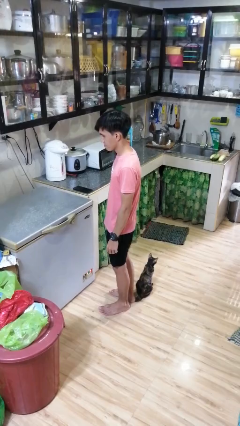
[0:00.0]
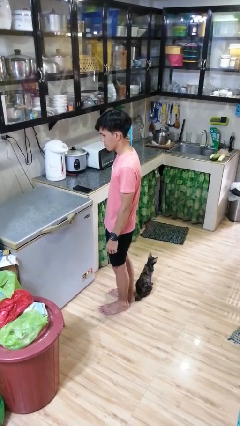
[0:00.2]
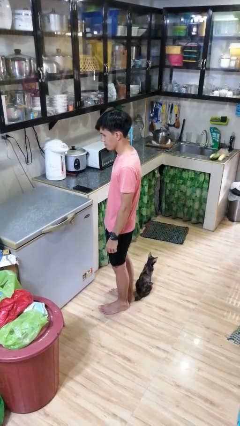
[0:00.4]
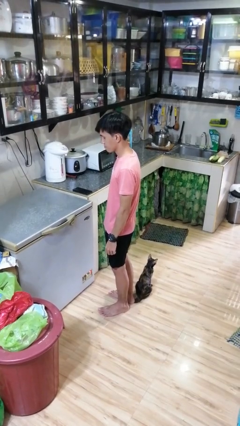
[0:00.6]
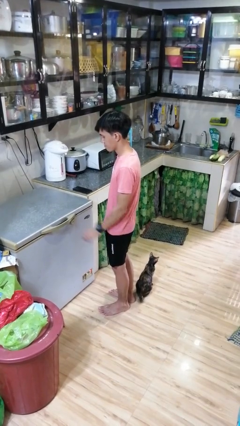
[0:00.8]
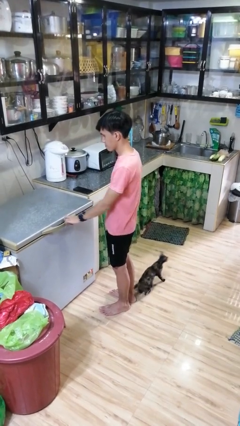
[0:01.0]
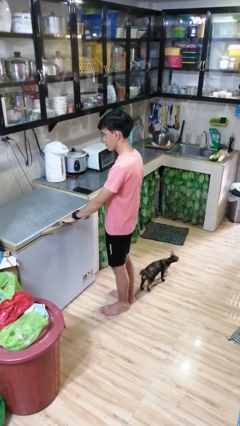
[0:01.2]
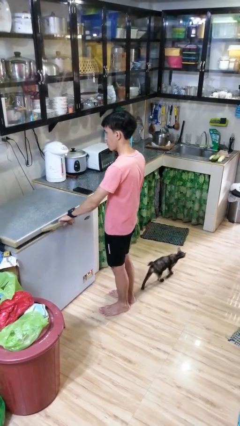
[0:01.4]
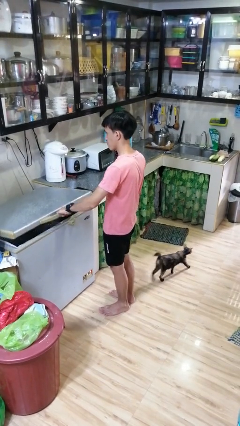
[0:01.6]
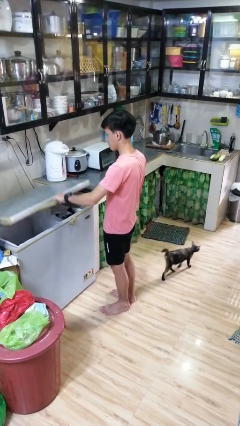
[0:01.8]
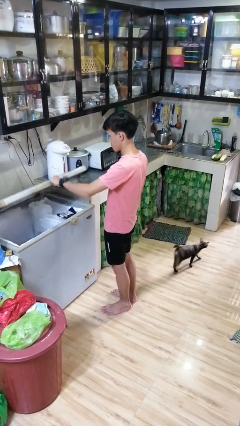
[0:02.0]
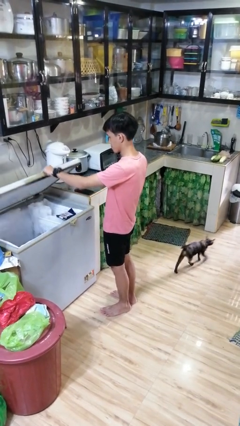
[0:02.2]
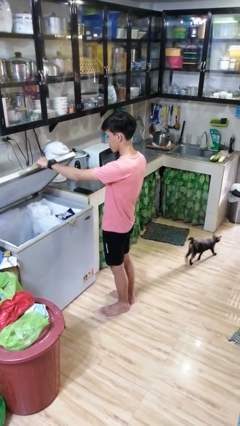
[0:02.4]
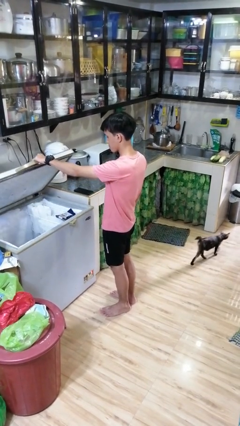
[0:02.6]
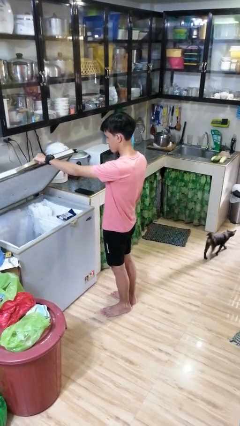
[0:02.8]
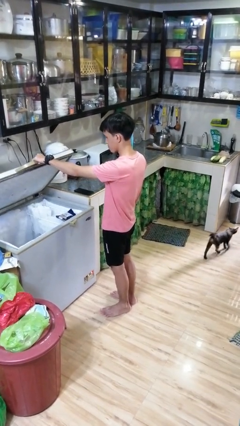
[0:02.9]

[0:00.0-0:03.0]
person opens refrigerator

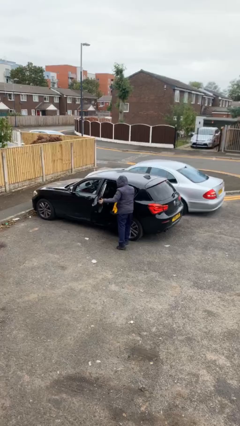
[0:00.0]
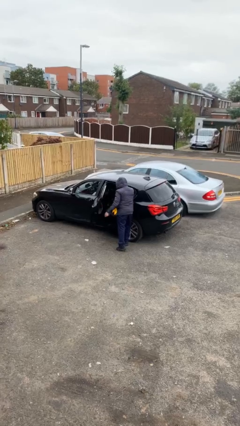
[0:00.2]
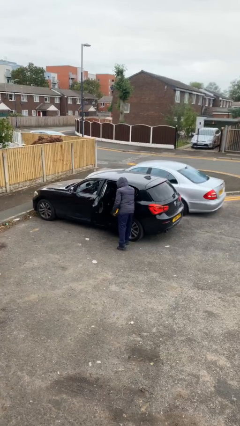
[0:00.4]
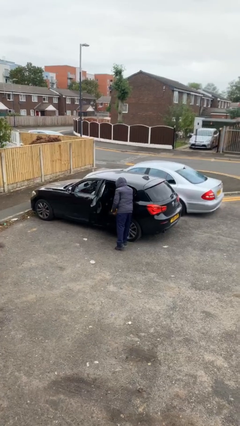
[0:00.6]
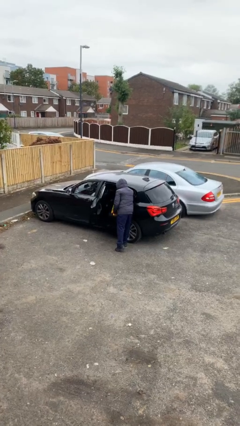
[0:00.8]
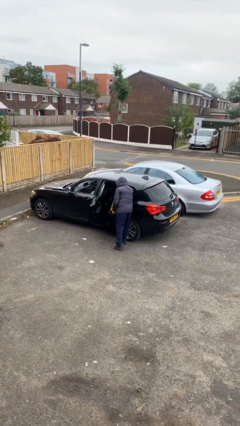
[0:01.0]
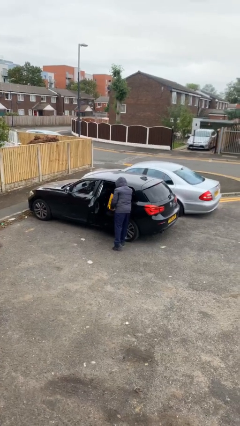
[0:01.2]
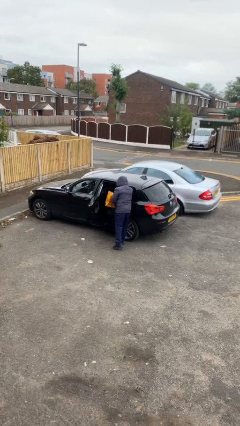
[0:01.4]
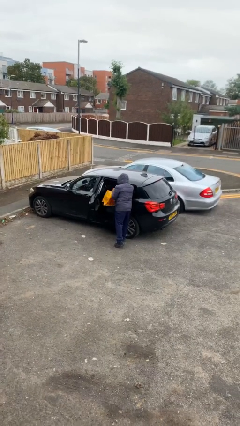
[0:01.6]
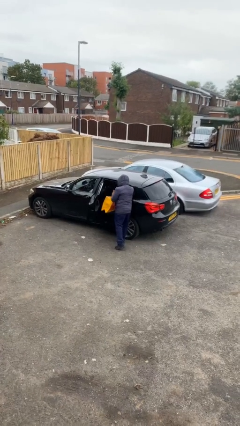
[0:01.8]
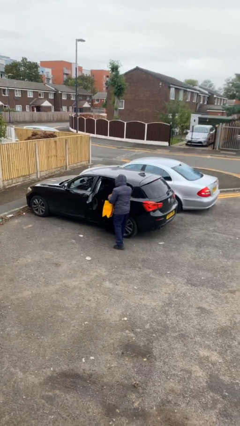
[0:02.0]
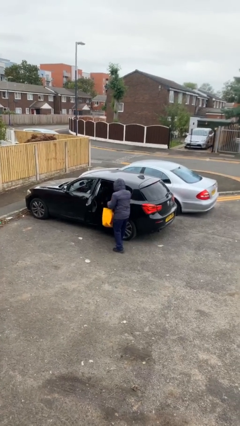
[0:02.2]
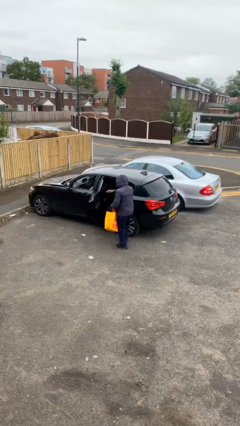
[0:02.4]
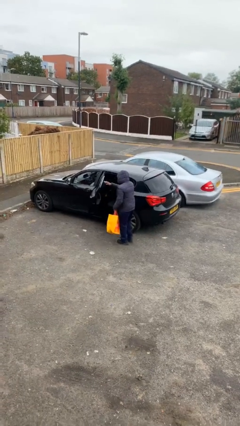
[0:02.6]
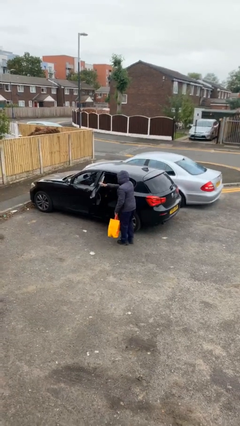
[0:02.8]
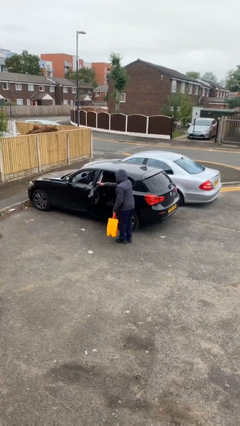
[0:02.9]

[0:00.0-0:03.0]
person unloads car

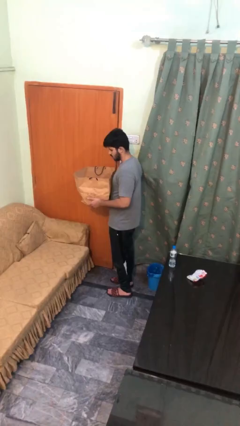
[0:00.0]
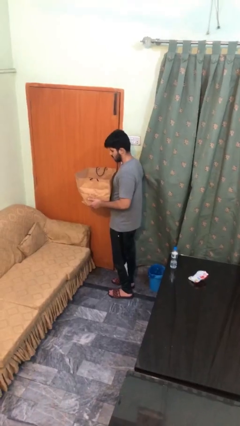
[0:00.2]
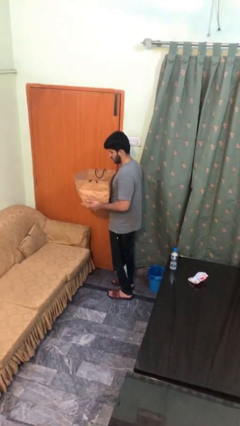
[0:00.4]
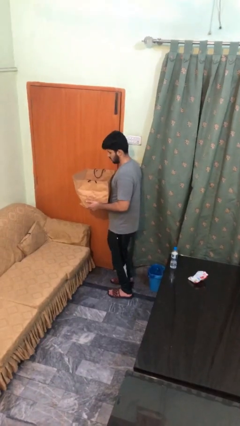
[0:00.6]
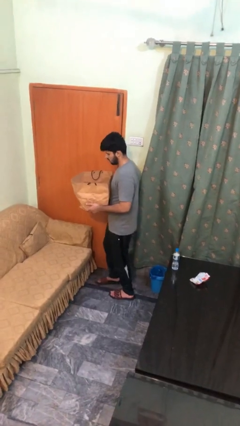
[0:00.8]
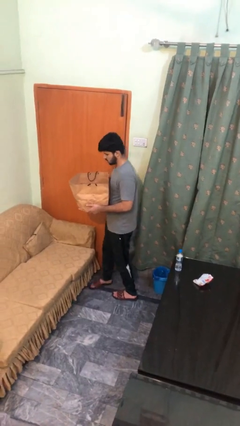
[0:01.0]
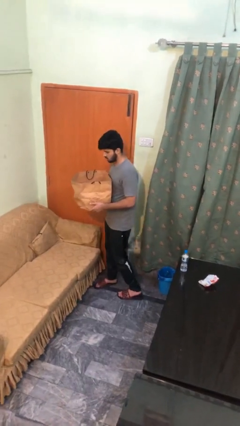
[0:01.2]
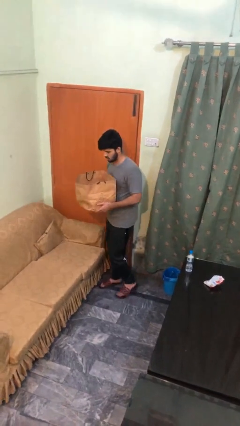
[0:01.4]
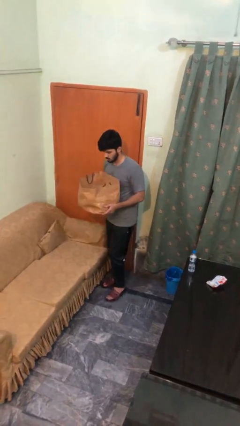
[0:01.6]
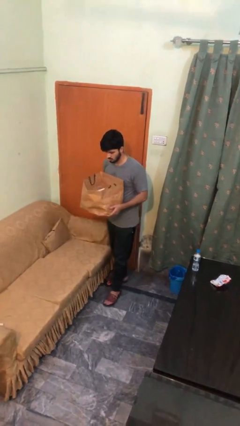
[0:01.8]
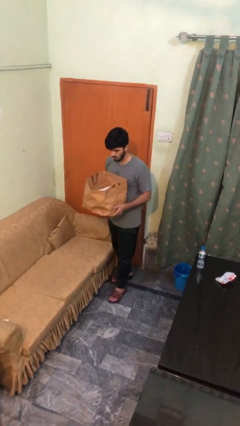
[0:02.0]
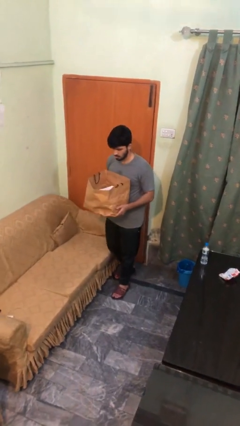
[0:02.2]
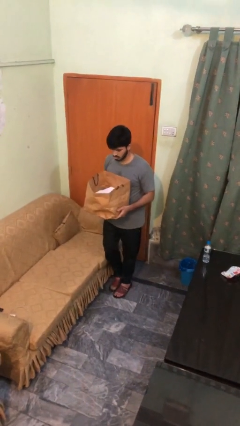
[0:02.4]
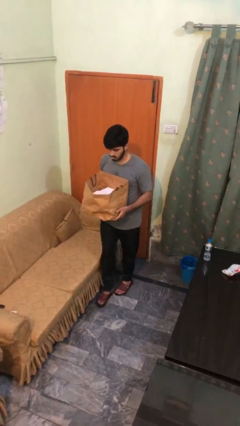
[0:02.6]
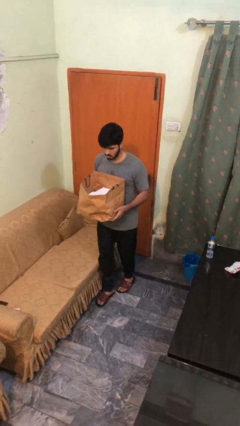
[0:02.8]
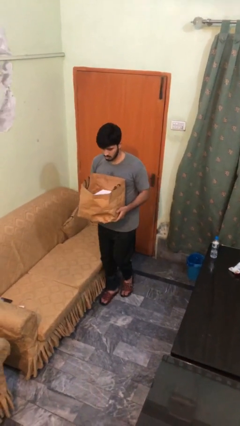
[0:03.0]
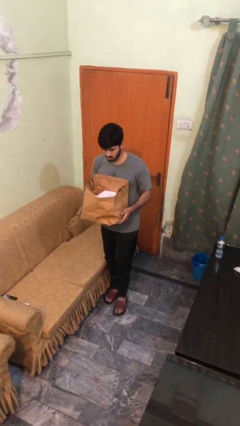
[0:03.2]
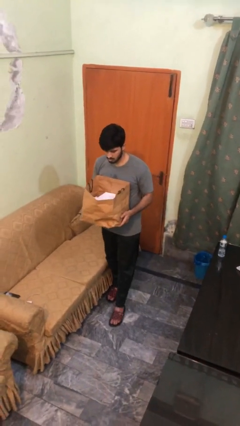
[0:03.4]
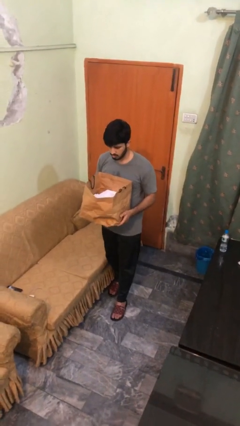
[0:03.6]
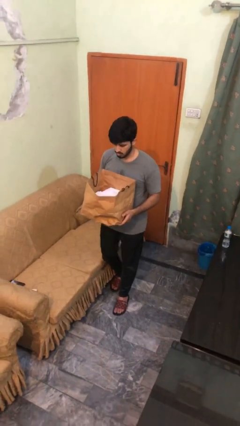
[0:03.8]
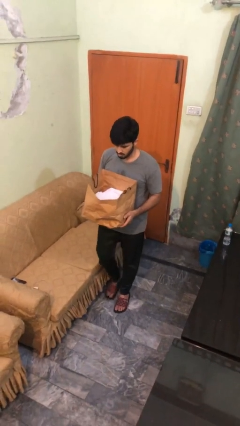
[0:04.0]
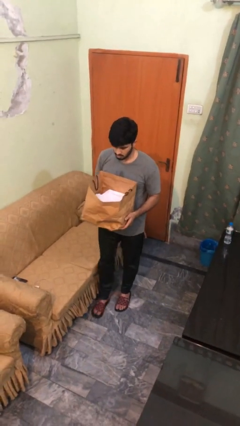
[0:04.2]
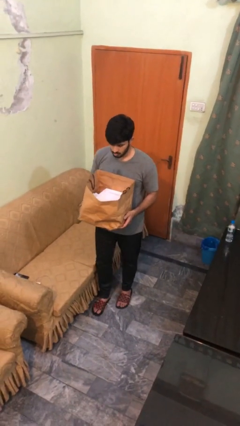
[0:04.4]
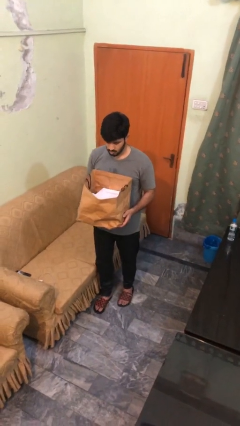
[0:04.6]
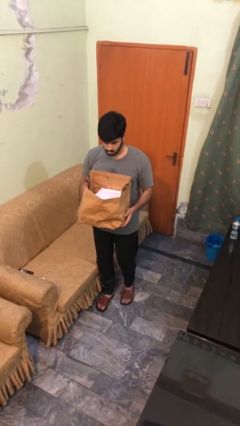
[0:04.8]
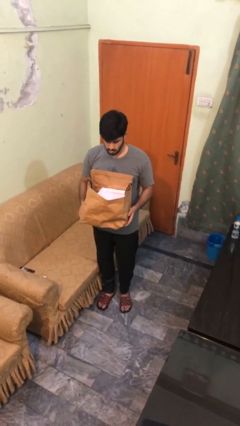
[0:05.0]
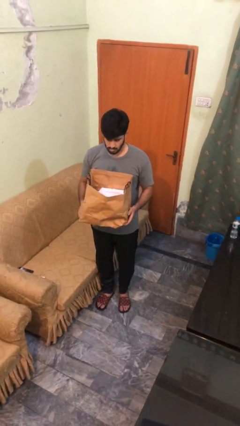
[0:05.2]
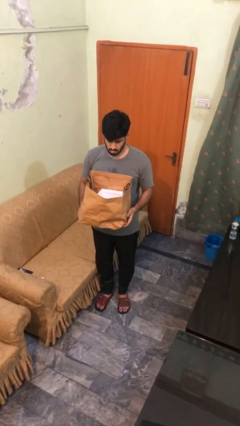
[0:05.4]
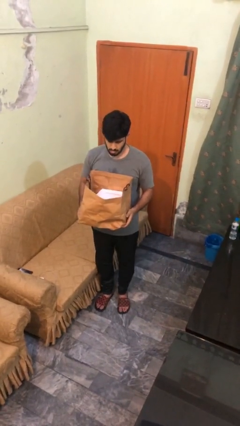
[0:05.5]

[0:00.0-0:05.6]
person carries groceries

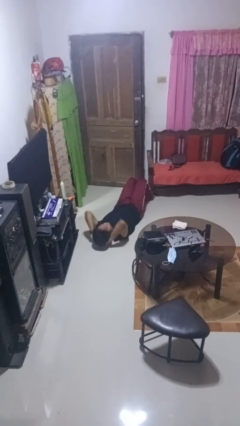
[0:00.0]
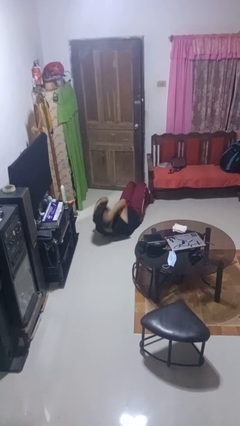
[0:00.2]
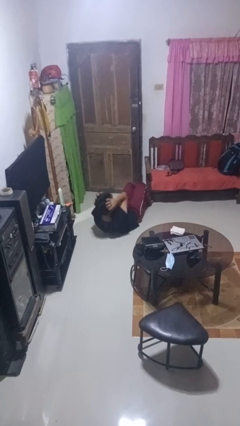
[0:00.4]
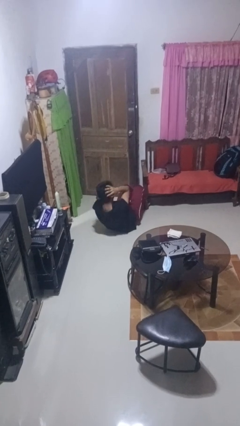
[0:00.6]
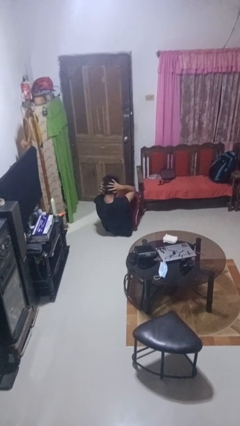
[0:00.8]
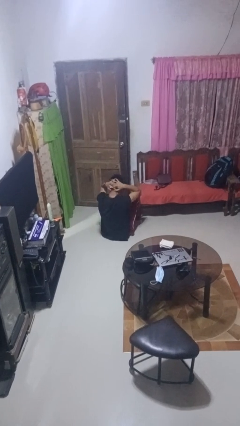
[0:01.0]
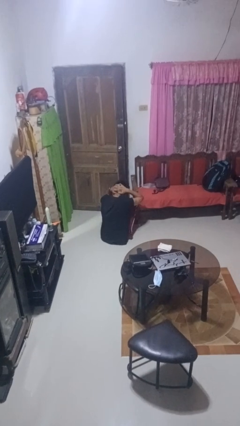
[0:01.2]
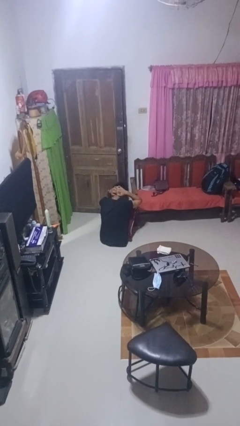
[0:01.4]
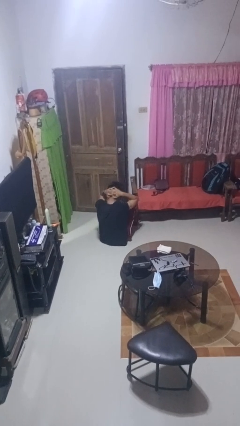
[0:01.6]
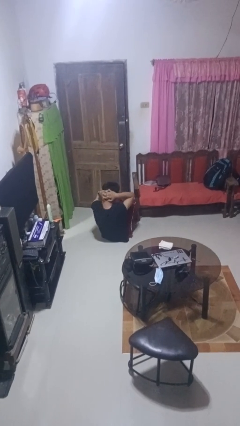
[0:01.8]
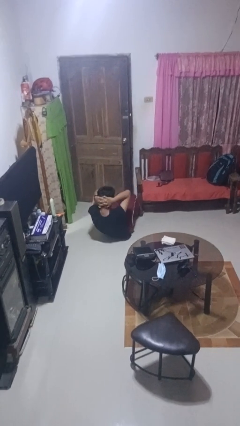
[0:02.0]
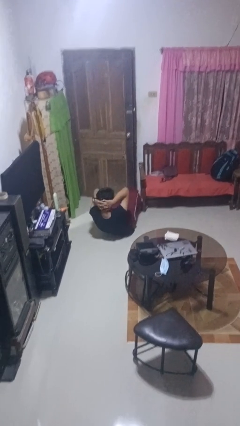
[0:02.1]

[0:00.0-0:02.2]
person exercises with situp

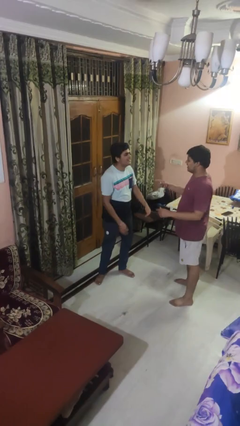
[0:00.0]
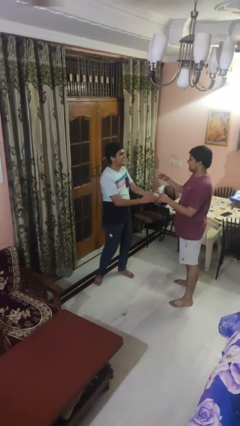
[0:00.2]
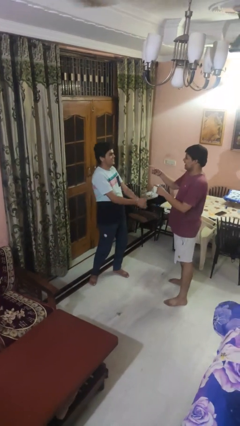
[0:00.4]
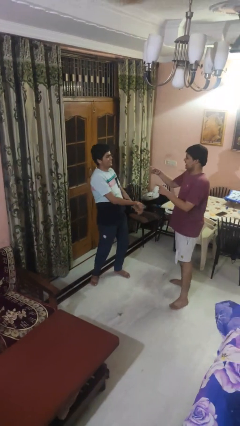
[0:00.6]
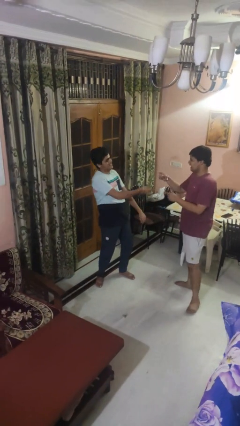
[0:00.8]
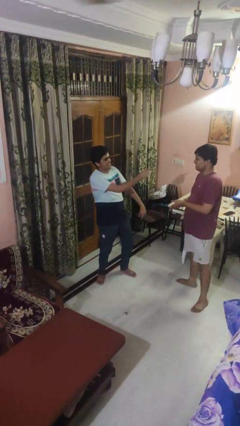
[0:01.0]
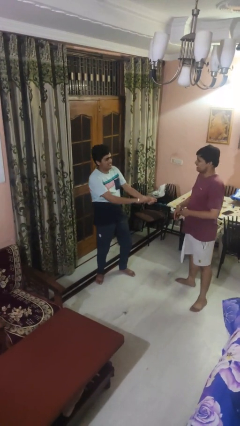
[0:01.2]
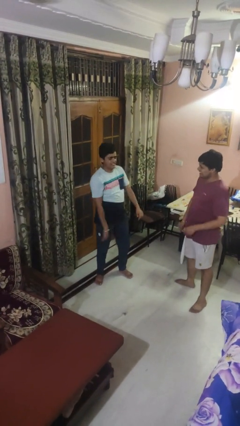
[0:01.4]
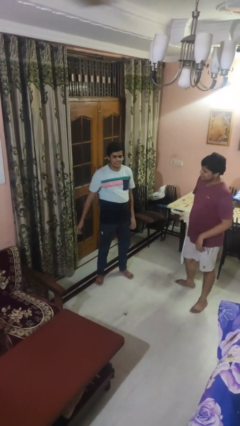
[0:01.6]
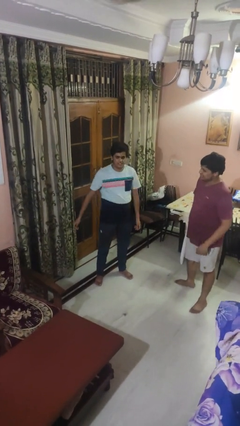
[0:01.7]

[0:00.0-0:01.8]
person laughs with person

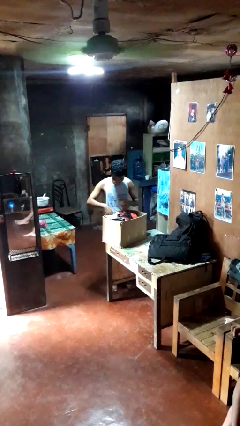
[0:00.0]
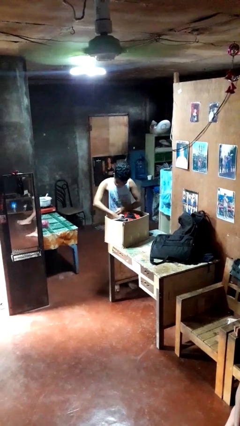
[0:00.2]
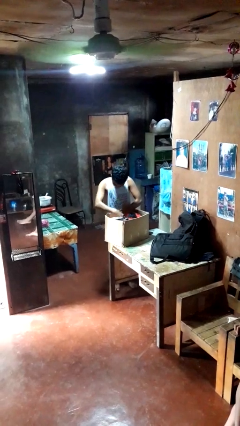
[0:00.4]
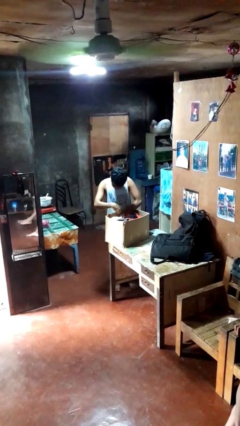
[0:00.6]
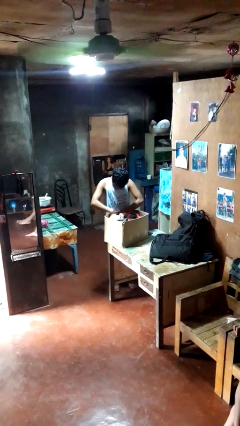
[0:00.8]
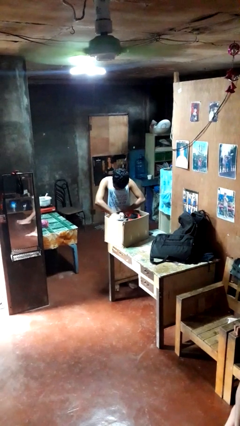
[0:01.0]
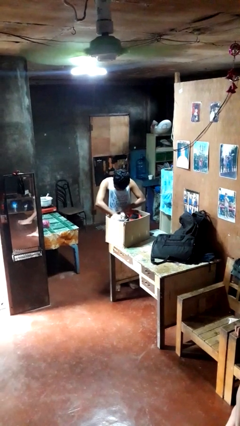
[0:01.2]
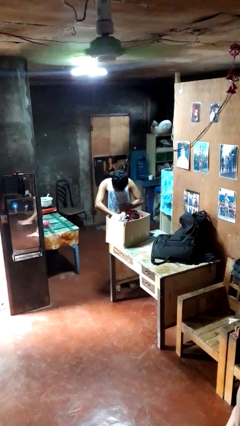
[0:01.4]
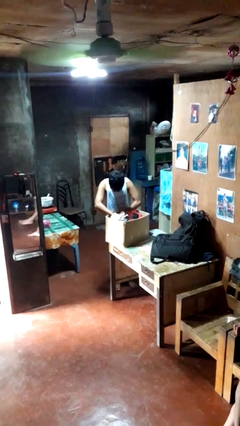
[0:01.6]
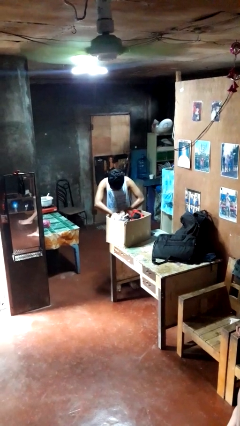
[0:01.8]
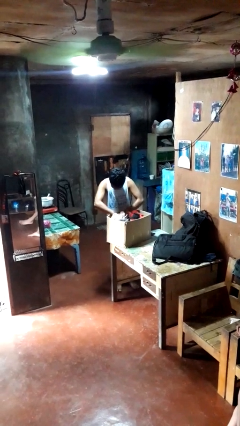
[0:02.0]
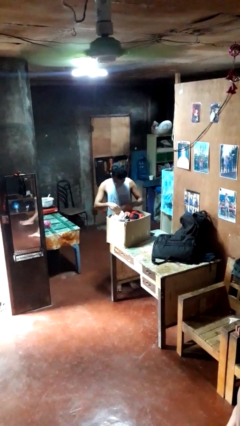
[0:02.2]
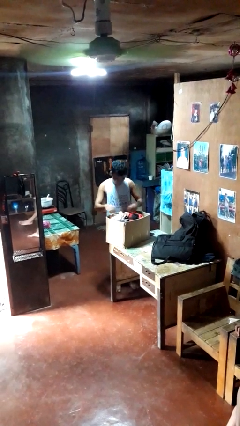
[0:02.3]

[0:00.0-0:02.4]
person searches in box
